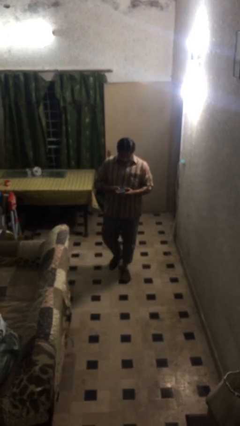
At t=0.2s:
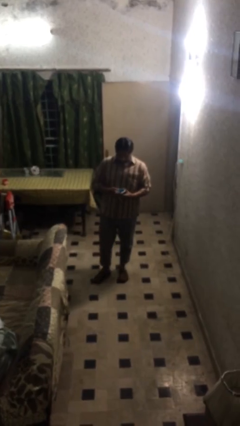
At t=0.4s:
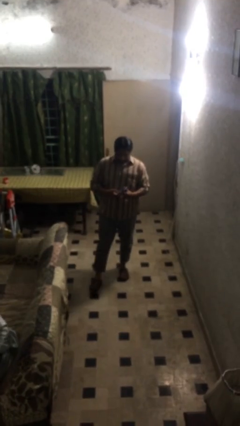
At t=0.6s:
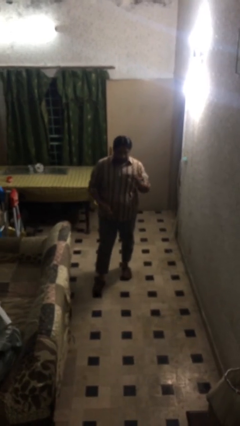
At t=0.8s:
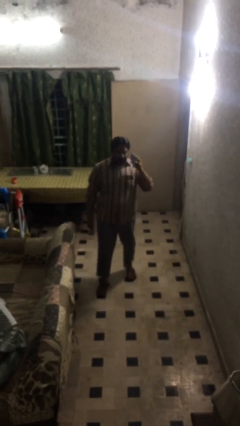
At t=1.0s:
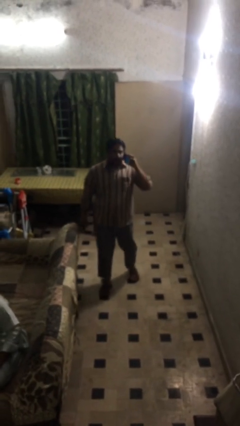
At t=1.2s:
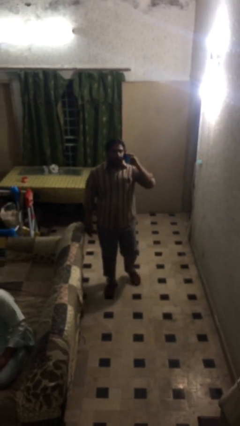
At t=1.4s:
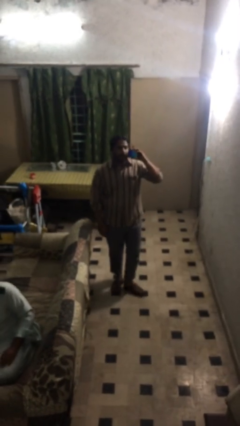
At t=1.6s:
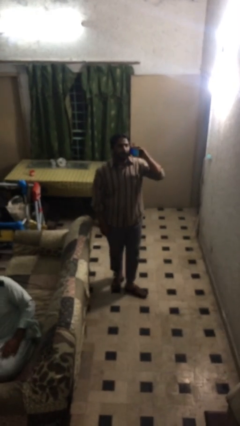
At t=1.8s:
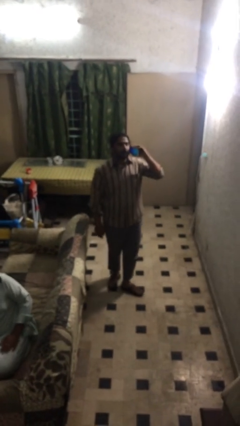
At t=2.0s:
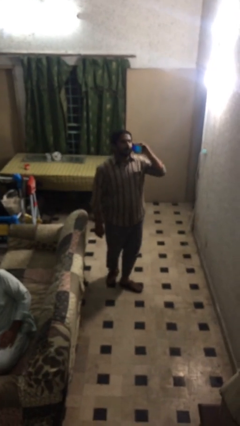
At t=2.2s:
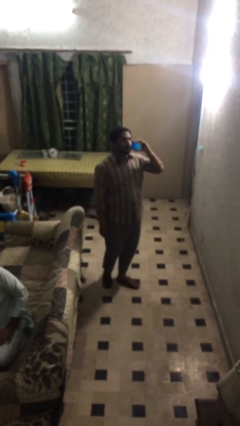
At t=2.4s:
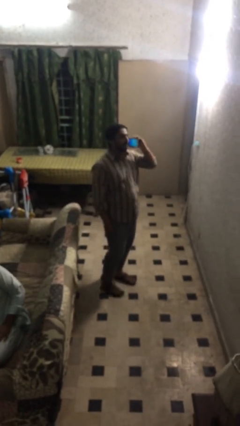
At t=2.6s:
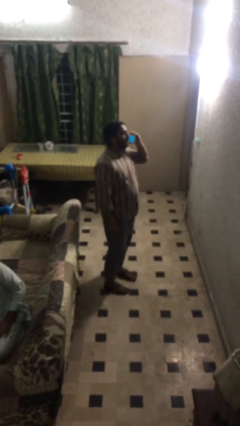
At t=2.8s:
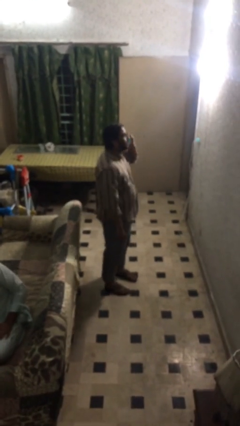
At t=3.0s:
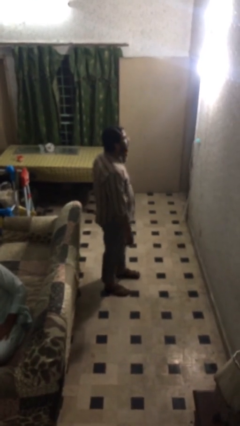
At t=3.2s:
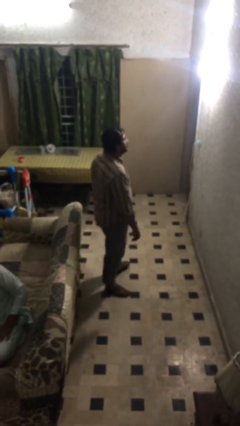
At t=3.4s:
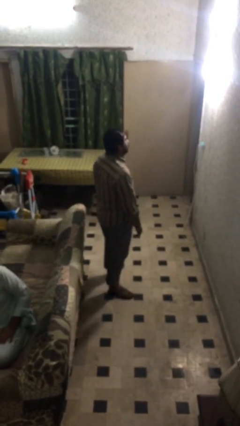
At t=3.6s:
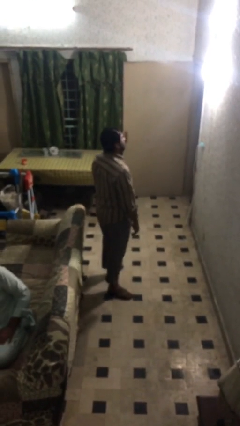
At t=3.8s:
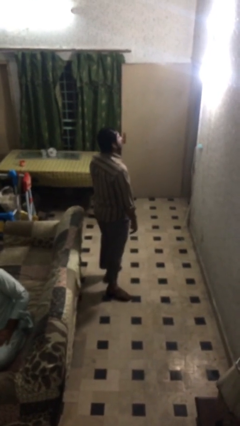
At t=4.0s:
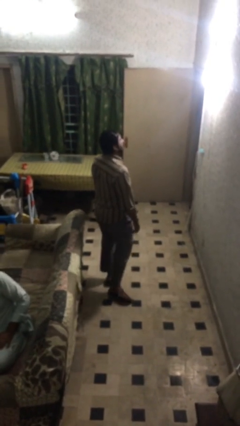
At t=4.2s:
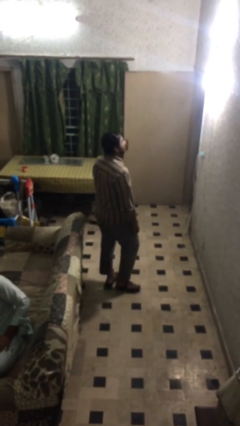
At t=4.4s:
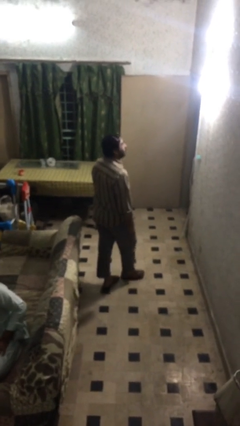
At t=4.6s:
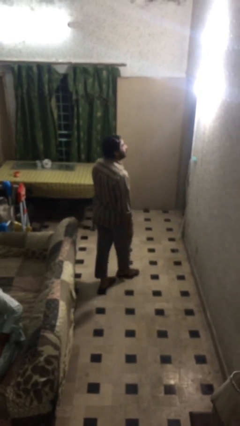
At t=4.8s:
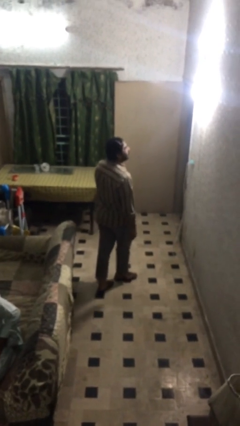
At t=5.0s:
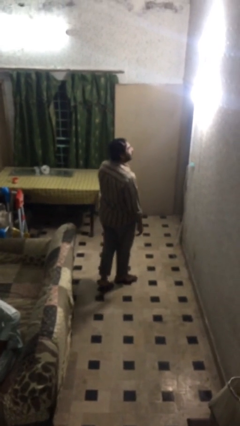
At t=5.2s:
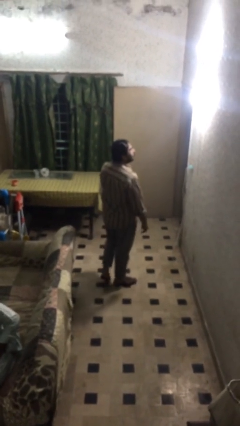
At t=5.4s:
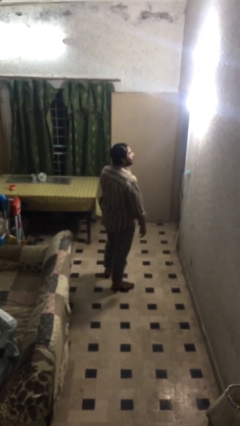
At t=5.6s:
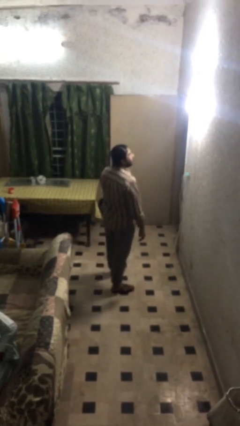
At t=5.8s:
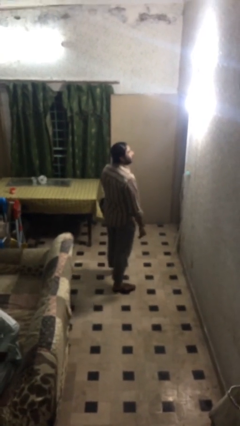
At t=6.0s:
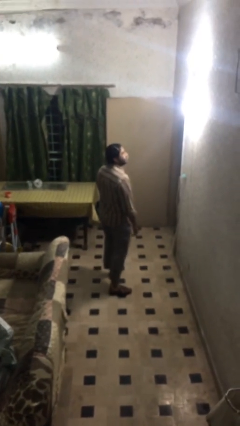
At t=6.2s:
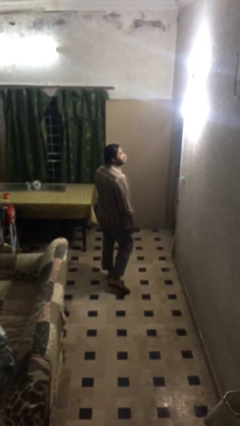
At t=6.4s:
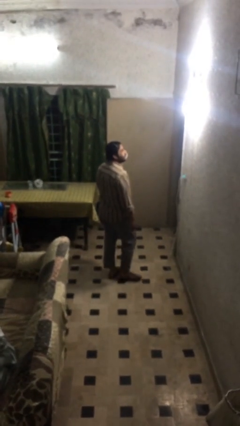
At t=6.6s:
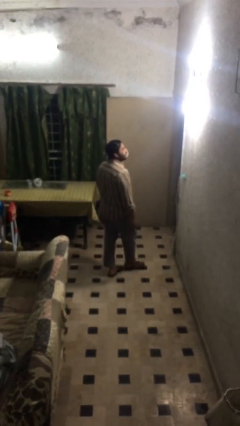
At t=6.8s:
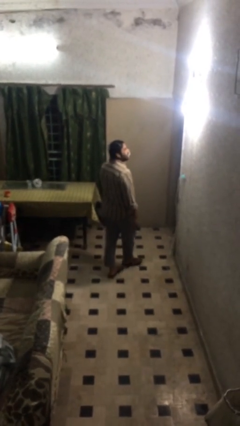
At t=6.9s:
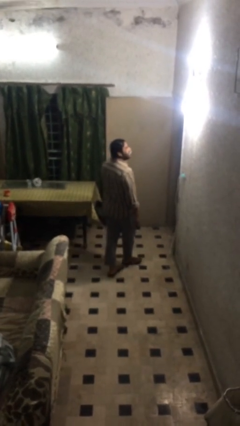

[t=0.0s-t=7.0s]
person talks on phone

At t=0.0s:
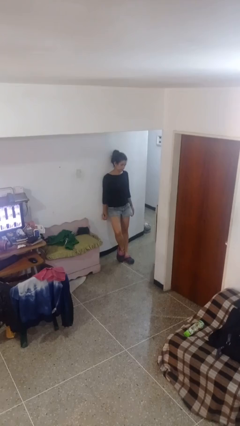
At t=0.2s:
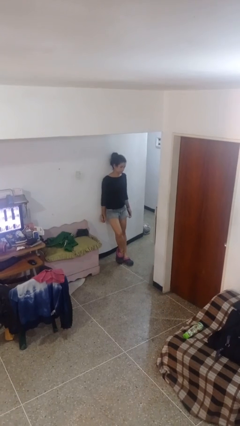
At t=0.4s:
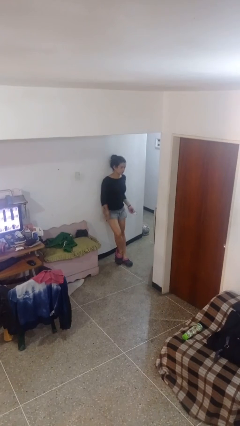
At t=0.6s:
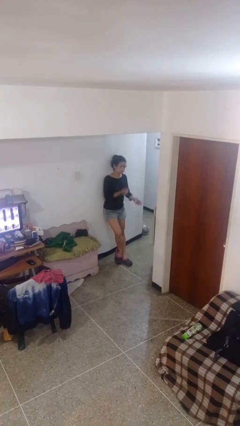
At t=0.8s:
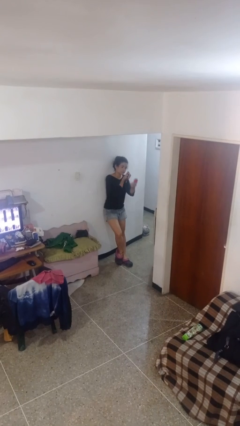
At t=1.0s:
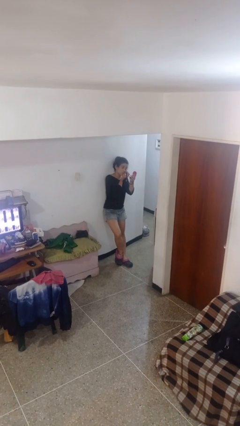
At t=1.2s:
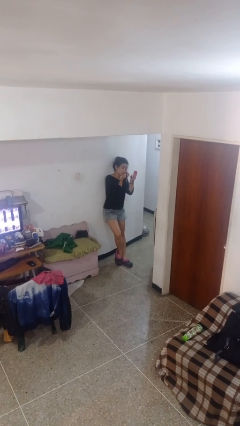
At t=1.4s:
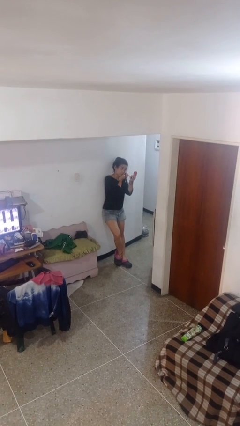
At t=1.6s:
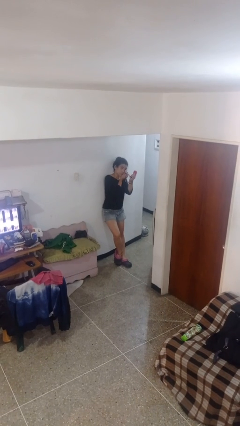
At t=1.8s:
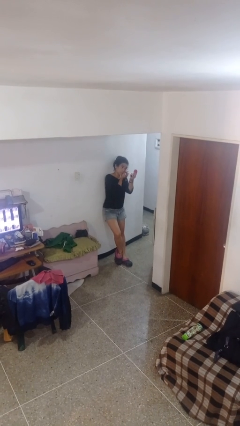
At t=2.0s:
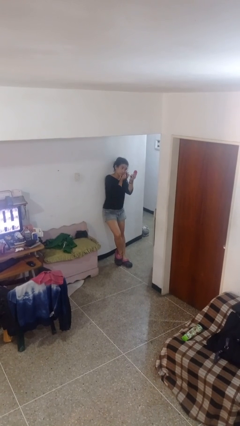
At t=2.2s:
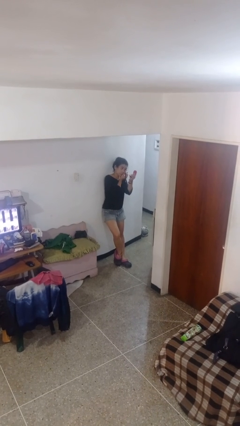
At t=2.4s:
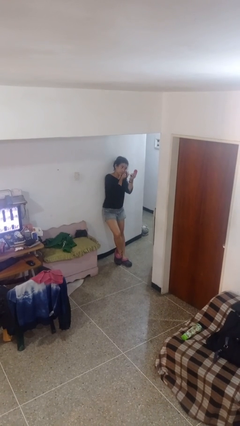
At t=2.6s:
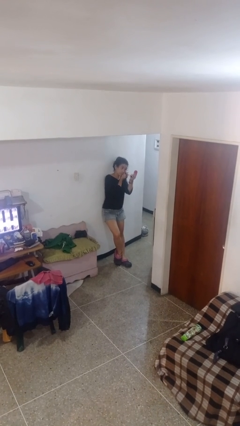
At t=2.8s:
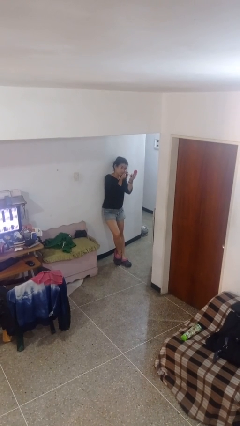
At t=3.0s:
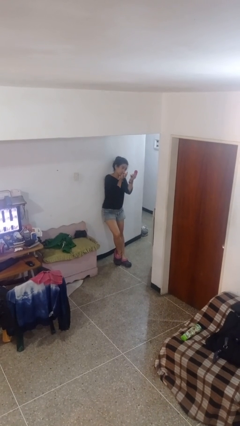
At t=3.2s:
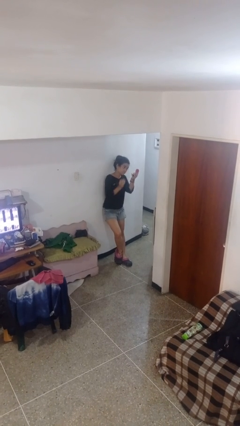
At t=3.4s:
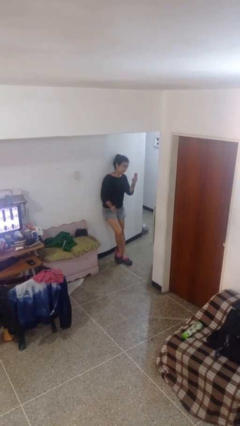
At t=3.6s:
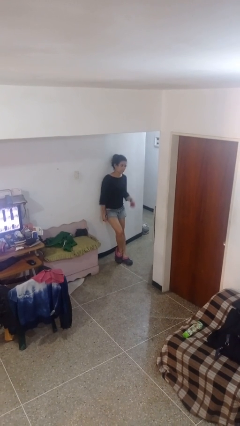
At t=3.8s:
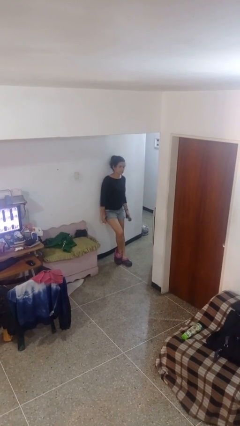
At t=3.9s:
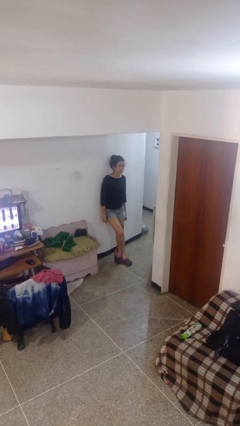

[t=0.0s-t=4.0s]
person applies eye makeup

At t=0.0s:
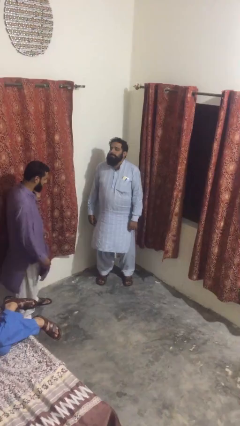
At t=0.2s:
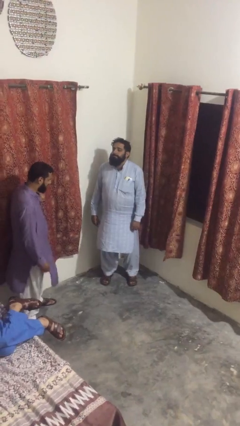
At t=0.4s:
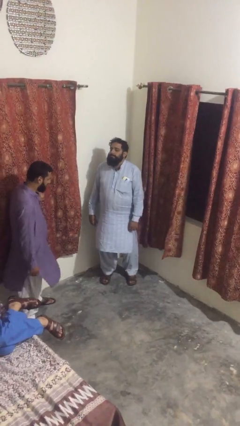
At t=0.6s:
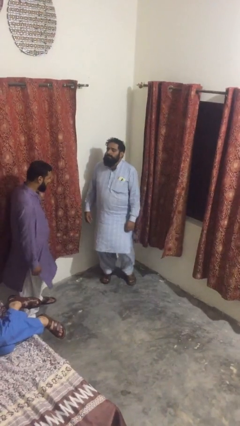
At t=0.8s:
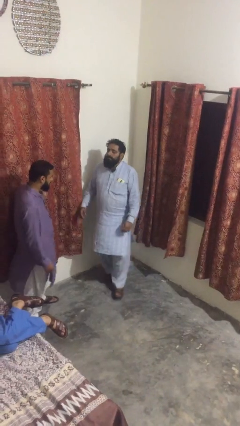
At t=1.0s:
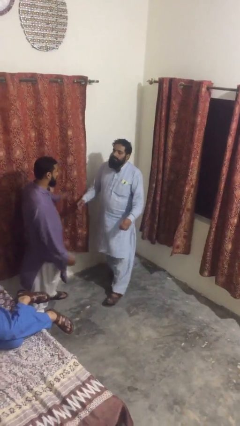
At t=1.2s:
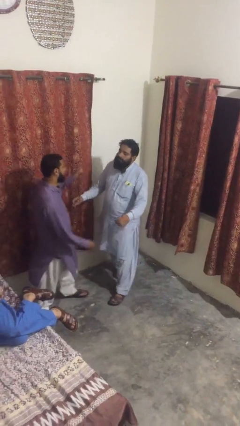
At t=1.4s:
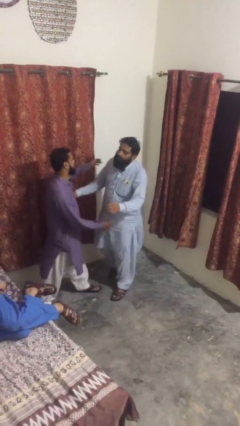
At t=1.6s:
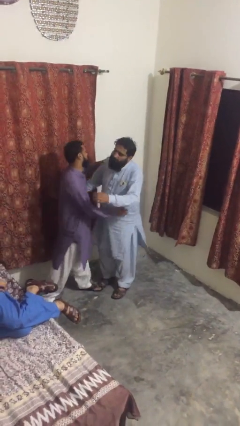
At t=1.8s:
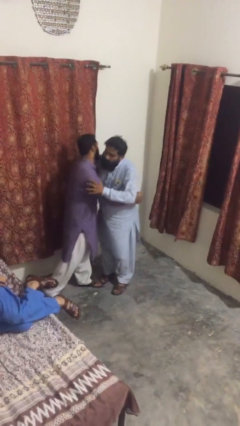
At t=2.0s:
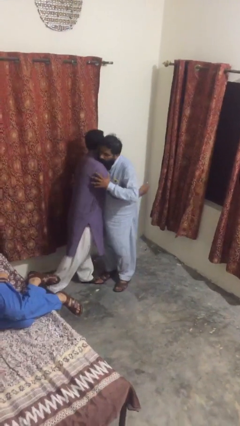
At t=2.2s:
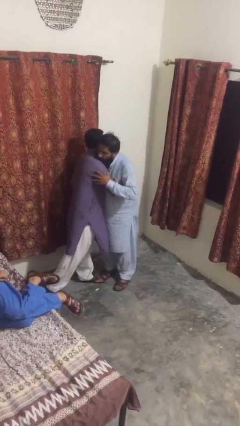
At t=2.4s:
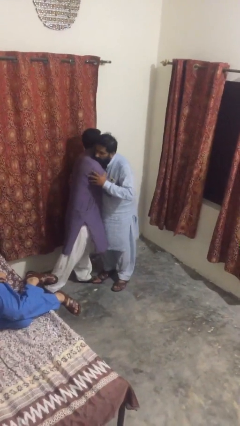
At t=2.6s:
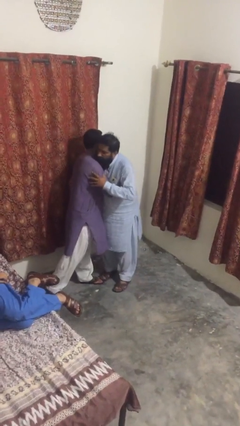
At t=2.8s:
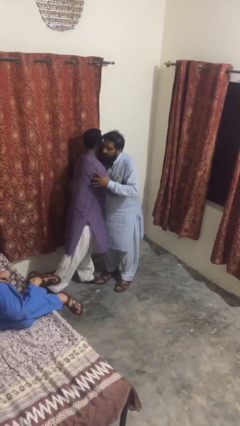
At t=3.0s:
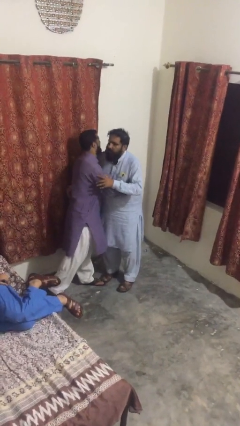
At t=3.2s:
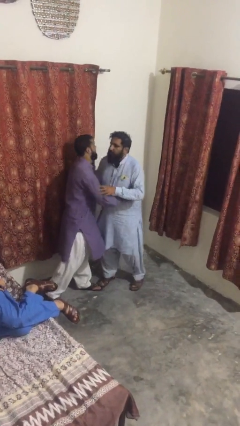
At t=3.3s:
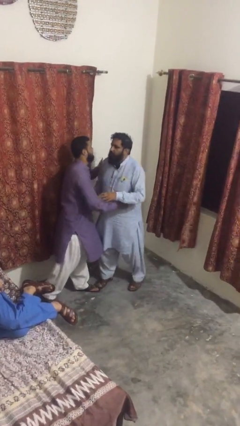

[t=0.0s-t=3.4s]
person embraces person

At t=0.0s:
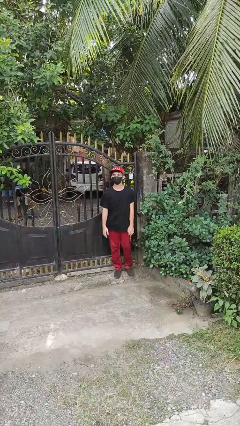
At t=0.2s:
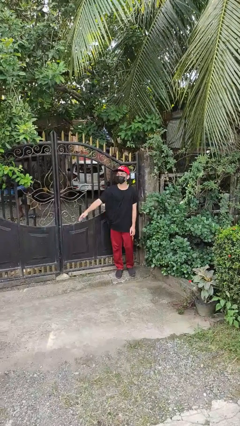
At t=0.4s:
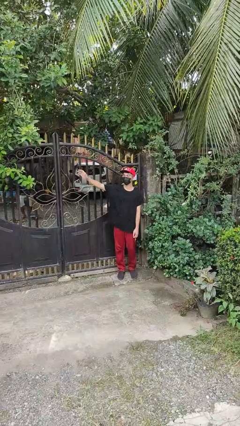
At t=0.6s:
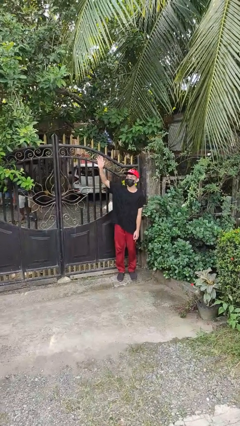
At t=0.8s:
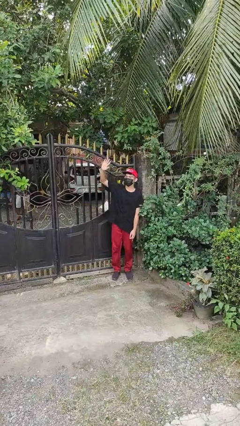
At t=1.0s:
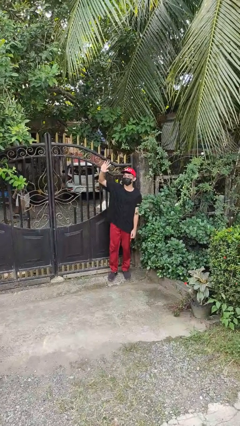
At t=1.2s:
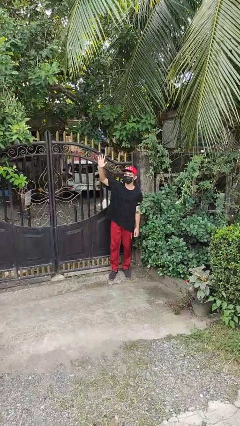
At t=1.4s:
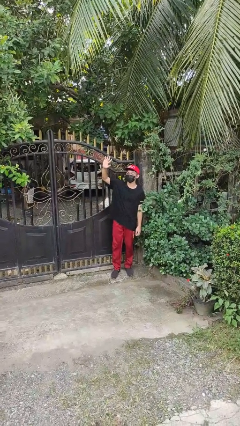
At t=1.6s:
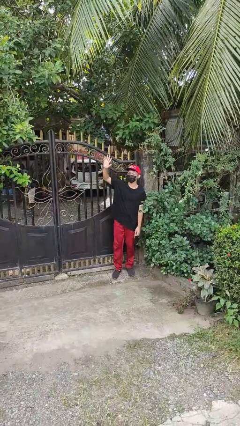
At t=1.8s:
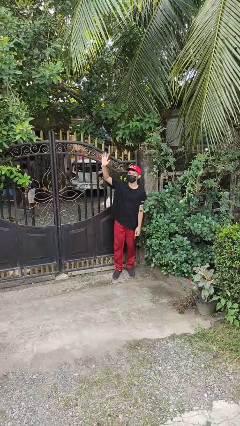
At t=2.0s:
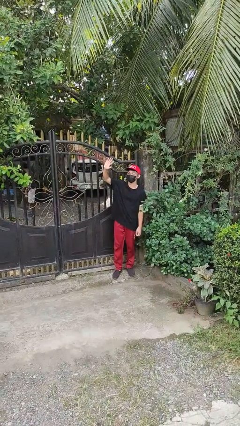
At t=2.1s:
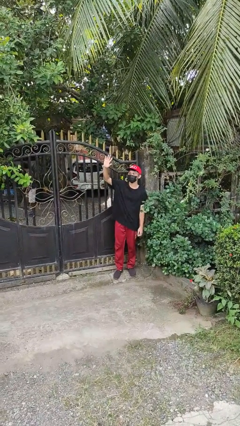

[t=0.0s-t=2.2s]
person waves at person

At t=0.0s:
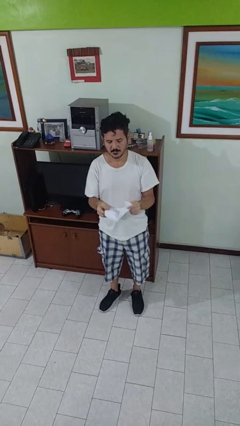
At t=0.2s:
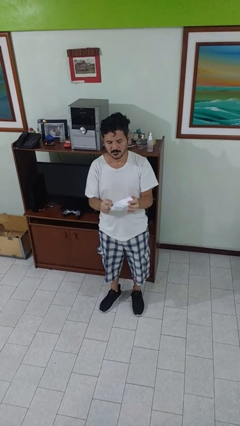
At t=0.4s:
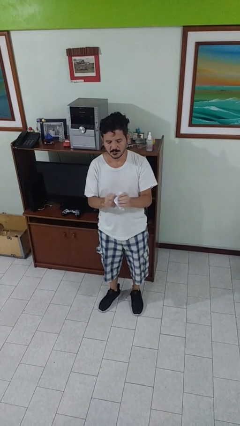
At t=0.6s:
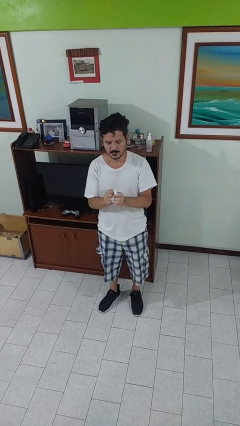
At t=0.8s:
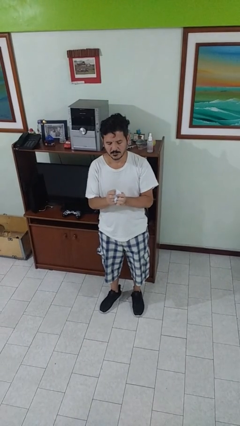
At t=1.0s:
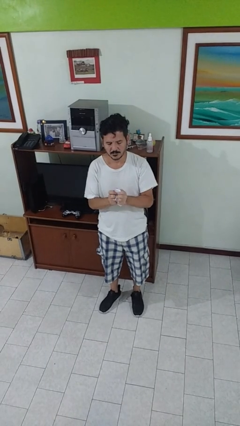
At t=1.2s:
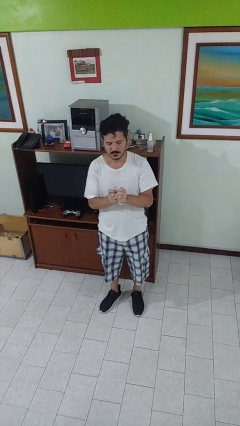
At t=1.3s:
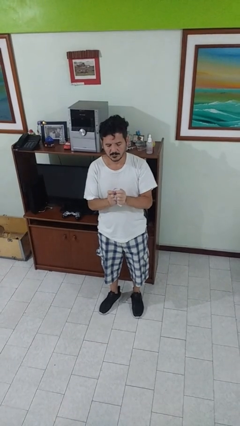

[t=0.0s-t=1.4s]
person crumples paper
